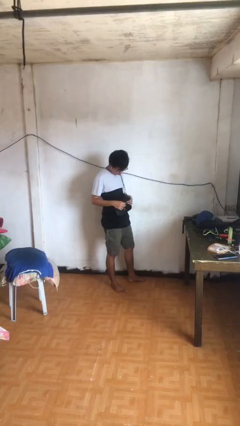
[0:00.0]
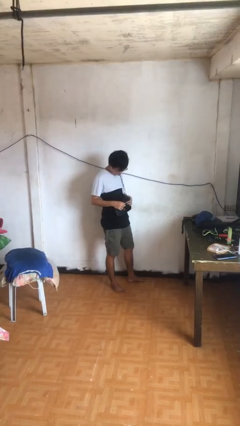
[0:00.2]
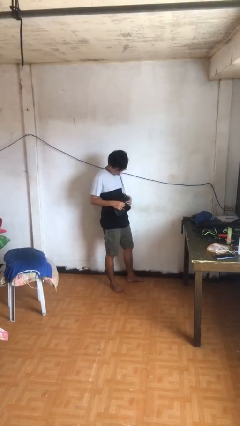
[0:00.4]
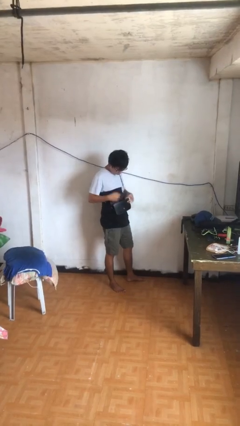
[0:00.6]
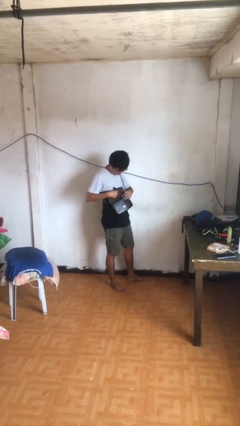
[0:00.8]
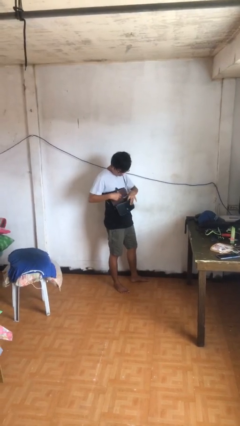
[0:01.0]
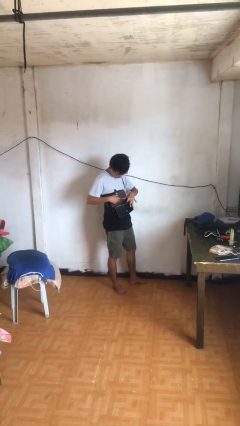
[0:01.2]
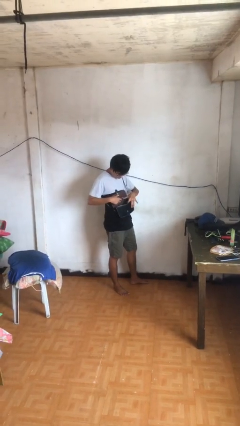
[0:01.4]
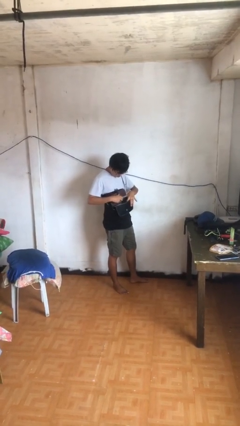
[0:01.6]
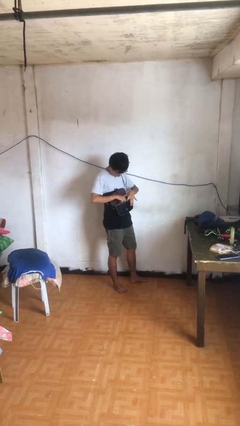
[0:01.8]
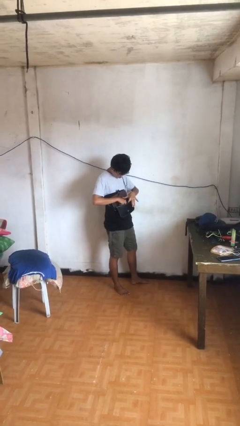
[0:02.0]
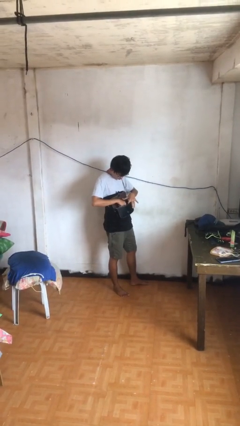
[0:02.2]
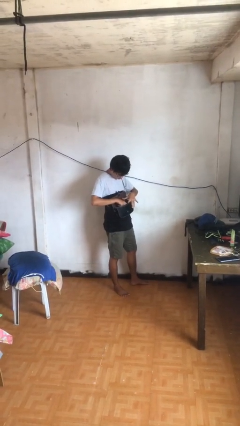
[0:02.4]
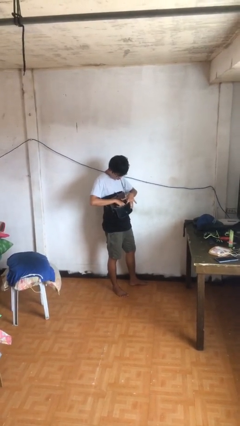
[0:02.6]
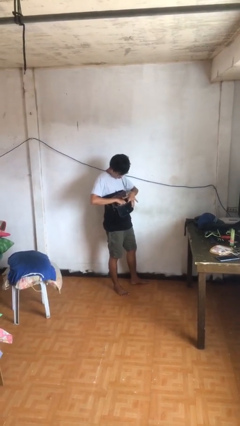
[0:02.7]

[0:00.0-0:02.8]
person searches in purse

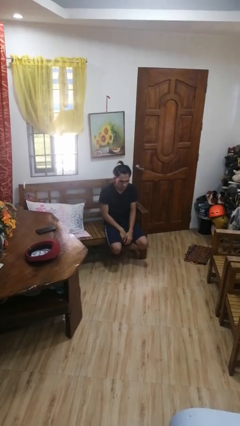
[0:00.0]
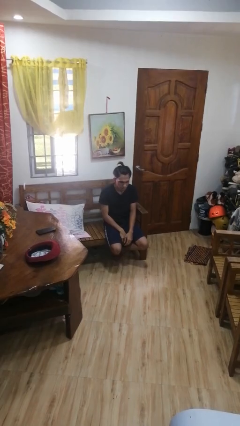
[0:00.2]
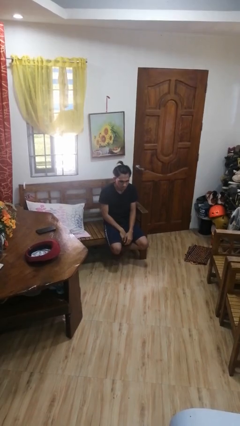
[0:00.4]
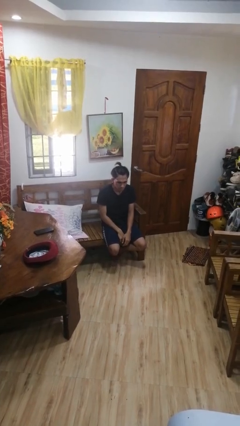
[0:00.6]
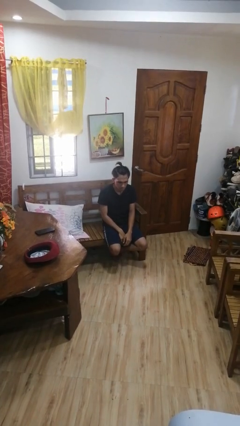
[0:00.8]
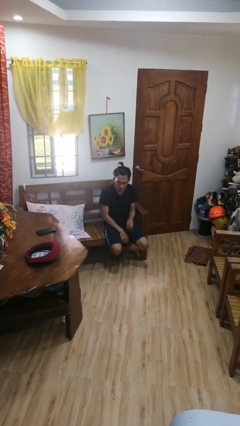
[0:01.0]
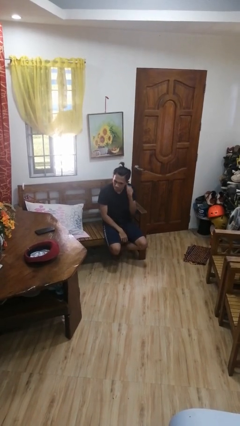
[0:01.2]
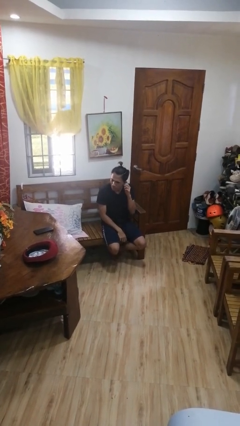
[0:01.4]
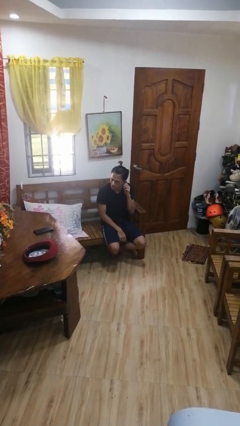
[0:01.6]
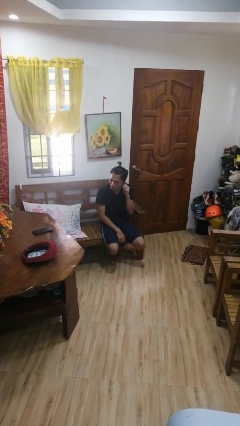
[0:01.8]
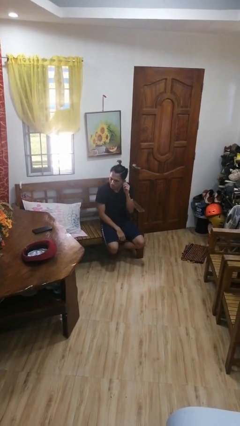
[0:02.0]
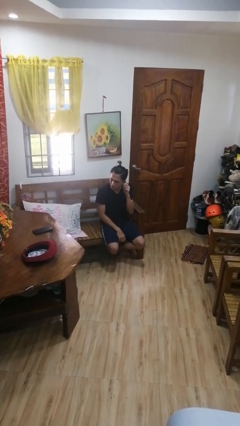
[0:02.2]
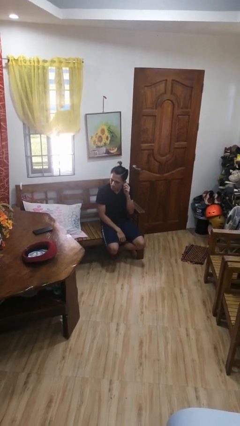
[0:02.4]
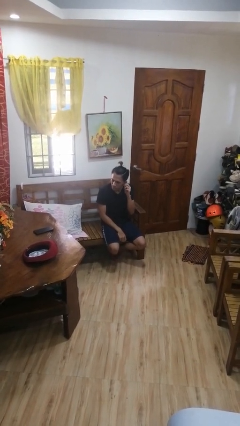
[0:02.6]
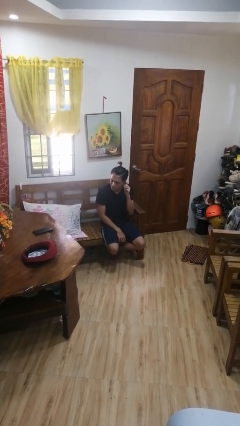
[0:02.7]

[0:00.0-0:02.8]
person touches earlobe

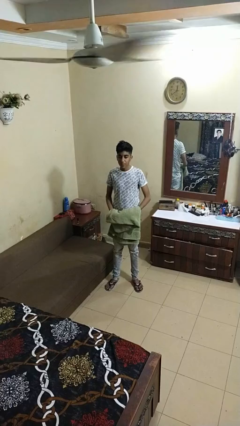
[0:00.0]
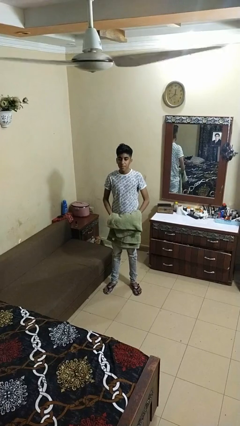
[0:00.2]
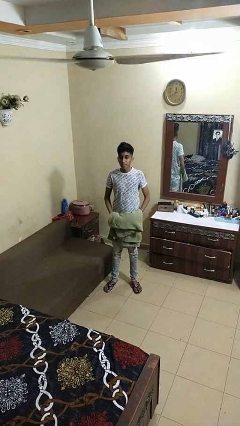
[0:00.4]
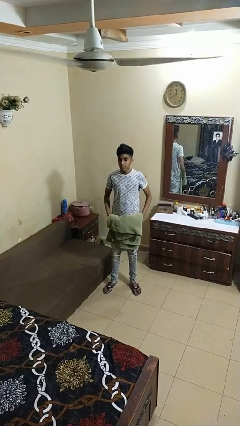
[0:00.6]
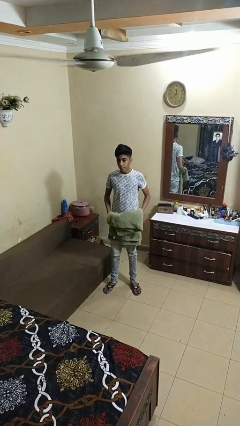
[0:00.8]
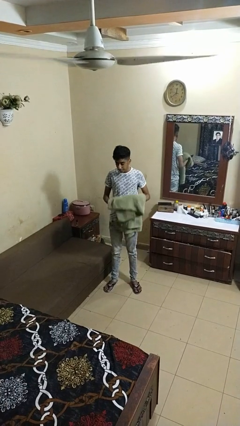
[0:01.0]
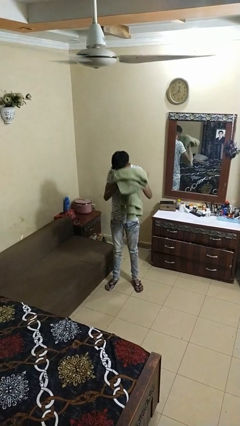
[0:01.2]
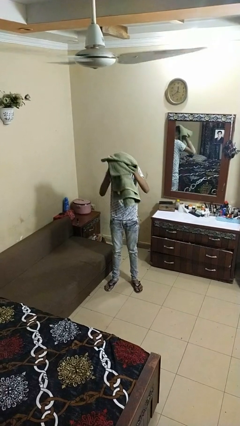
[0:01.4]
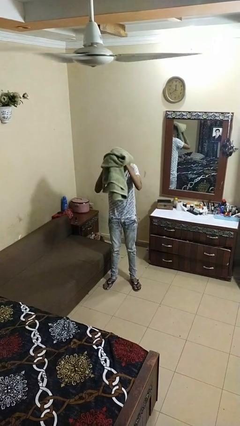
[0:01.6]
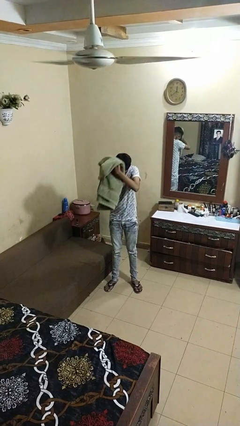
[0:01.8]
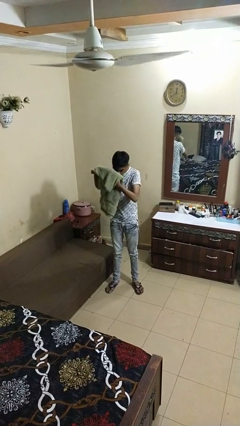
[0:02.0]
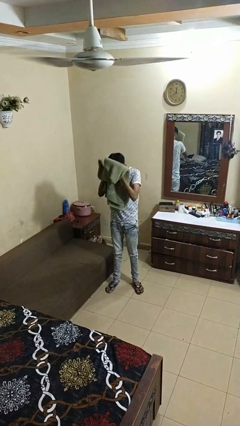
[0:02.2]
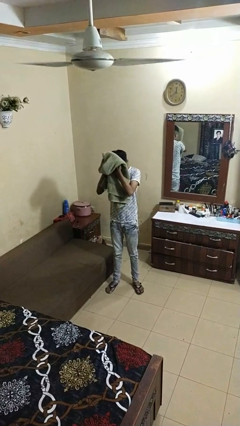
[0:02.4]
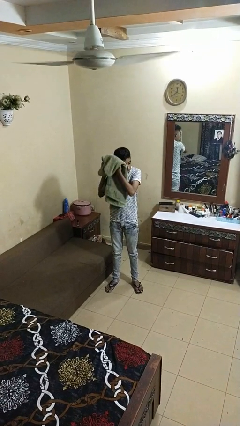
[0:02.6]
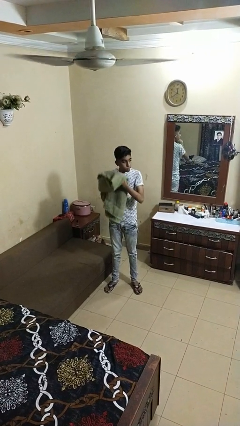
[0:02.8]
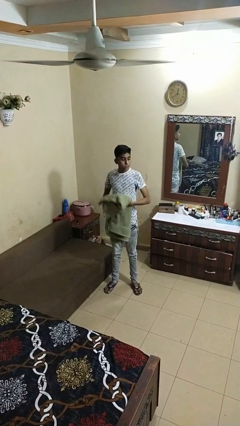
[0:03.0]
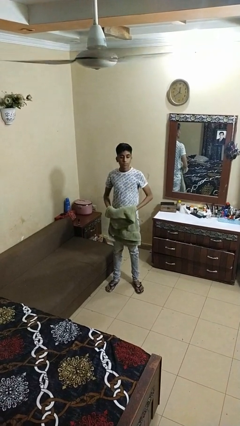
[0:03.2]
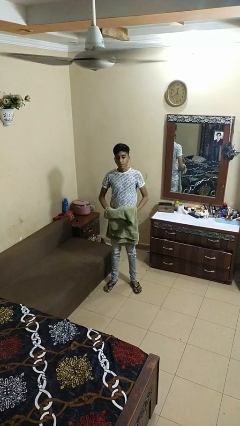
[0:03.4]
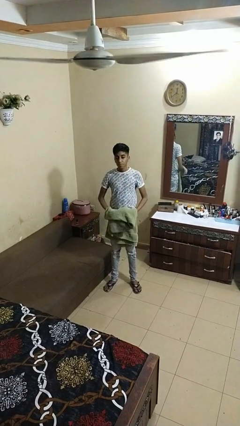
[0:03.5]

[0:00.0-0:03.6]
person dries hair with towel

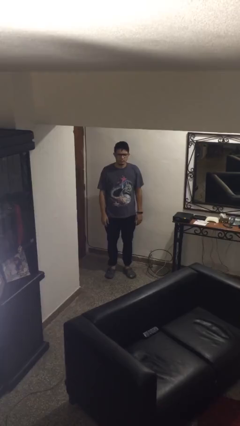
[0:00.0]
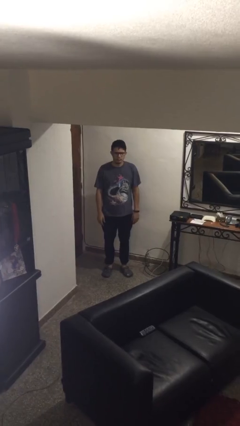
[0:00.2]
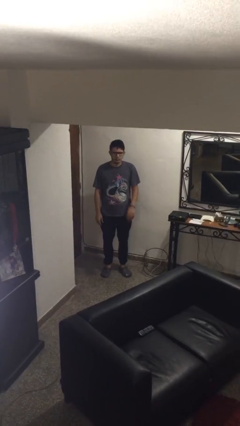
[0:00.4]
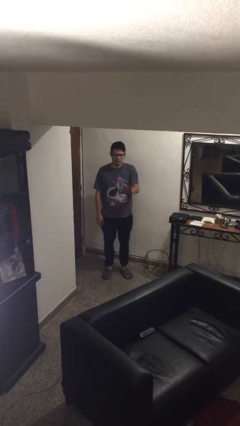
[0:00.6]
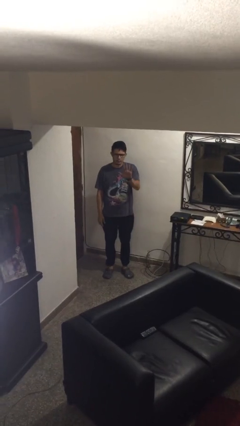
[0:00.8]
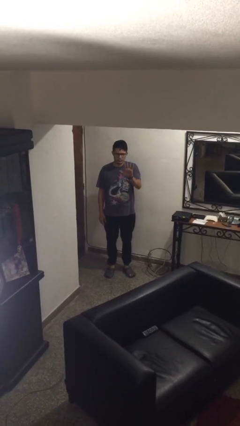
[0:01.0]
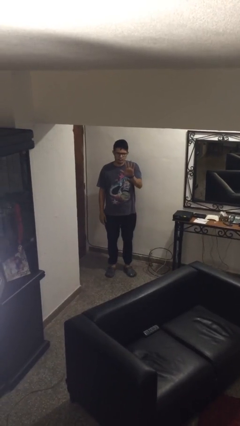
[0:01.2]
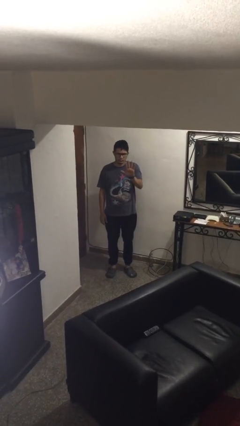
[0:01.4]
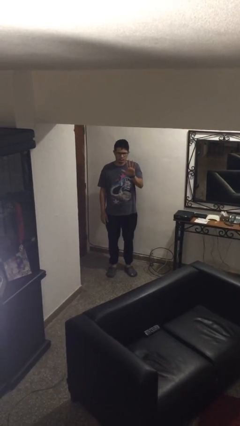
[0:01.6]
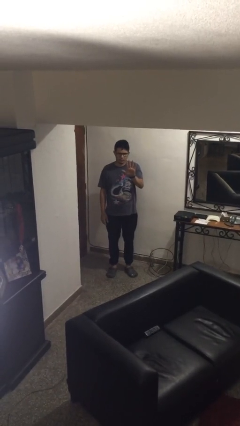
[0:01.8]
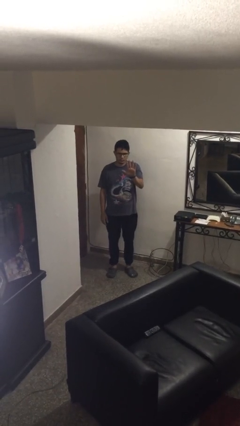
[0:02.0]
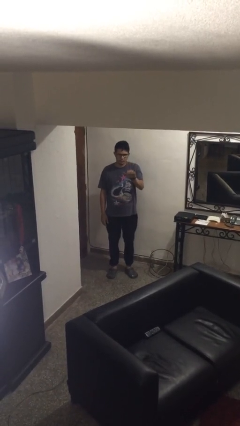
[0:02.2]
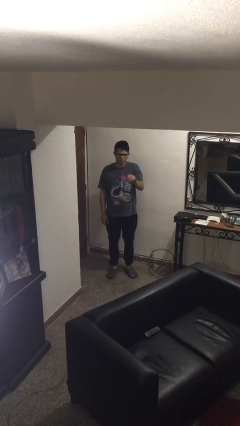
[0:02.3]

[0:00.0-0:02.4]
person gestures number five

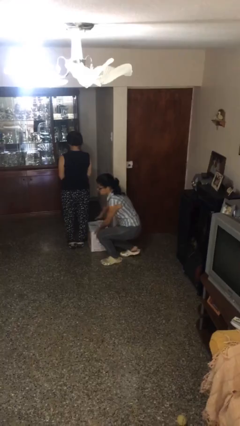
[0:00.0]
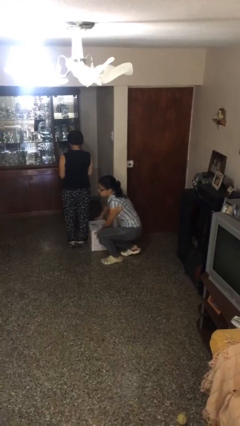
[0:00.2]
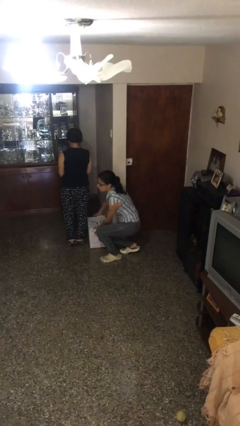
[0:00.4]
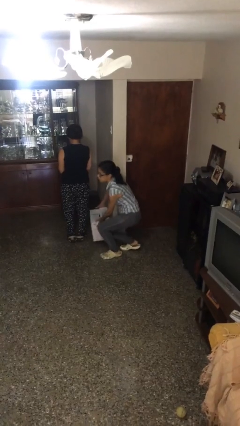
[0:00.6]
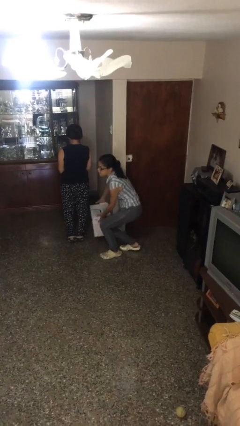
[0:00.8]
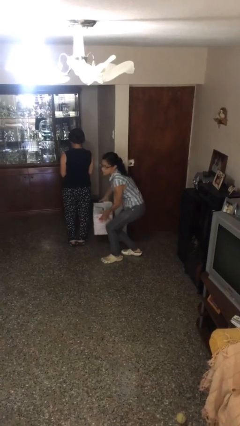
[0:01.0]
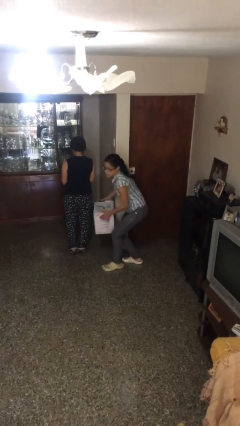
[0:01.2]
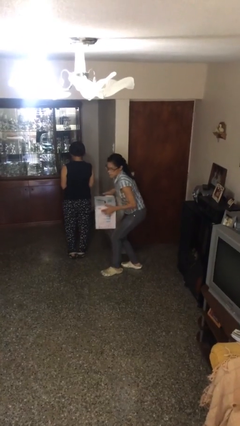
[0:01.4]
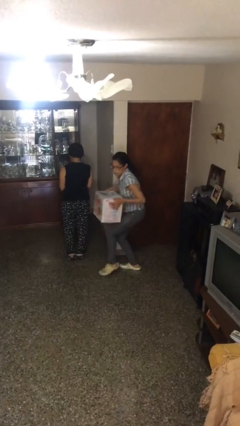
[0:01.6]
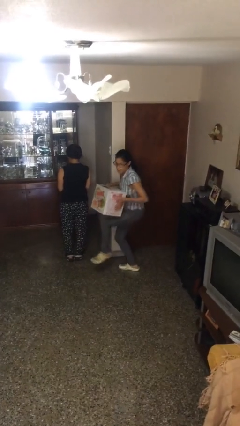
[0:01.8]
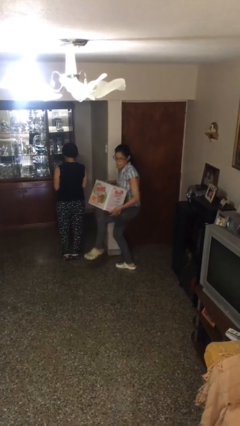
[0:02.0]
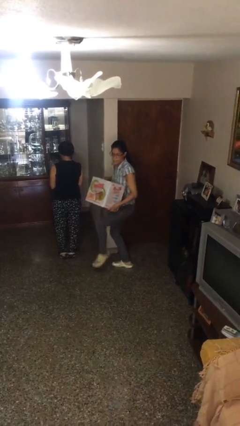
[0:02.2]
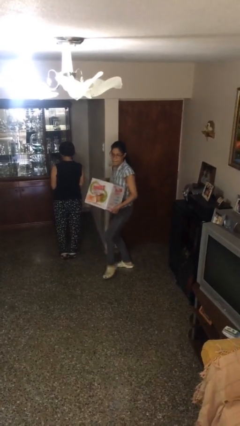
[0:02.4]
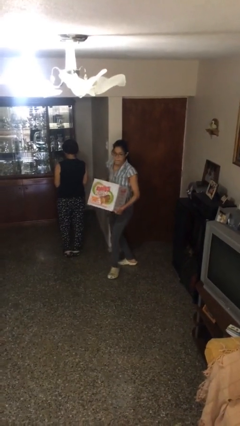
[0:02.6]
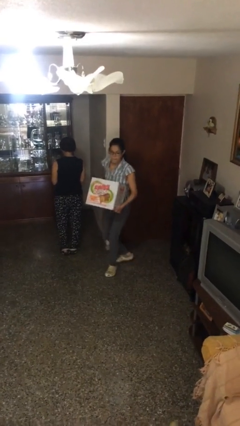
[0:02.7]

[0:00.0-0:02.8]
person steals object from person

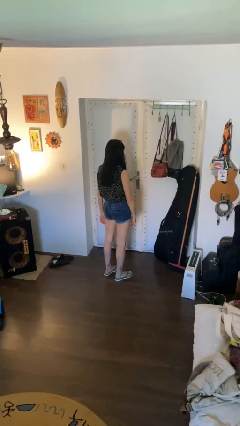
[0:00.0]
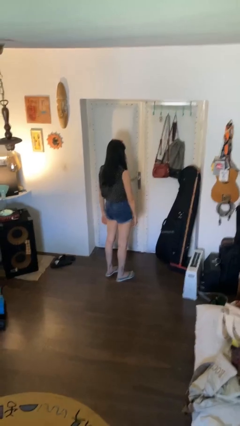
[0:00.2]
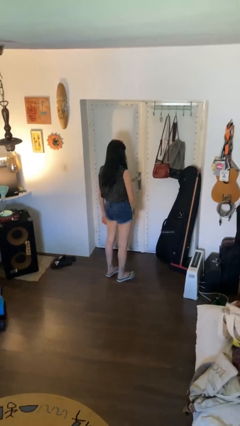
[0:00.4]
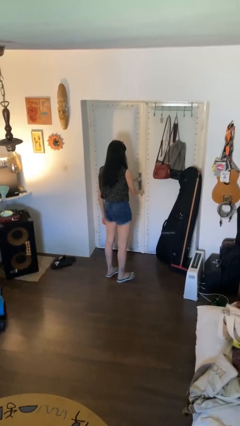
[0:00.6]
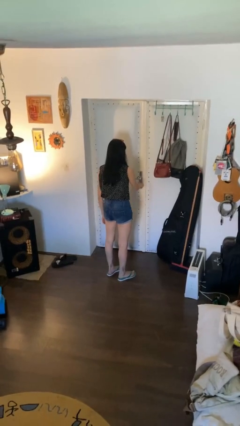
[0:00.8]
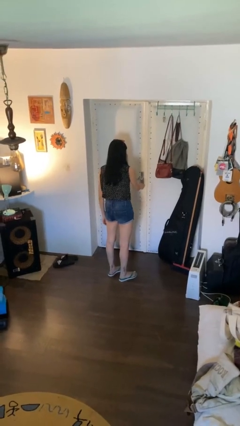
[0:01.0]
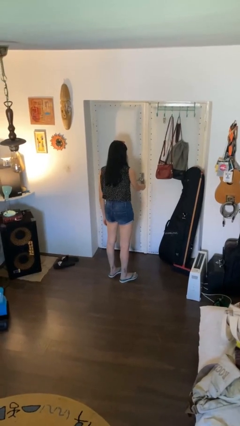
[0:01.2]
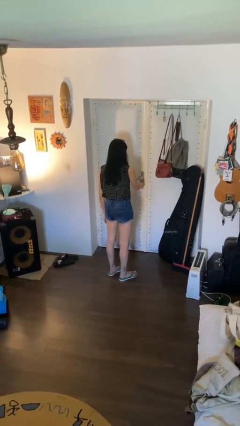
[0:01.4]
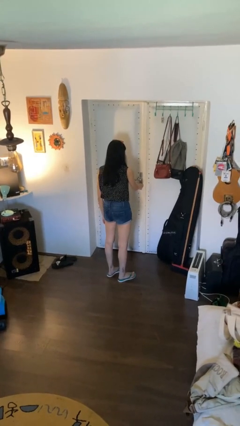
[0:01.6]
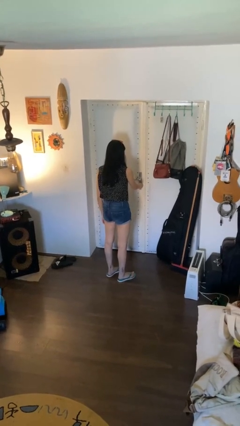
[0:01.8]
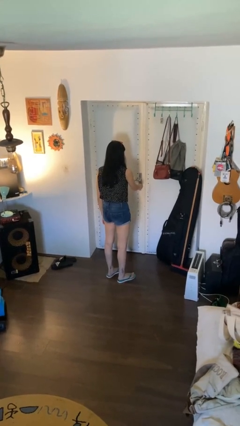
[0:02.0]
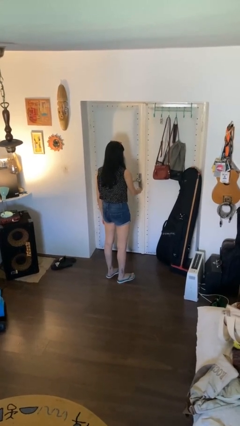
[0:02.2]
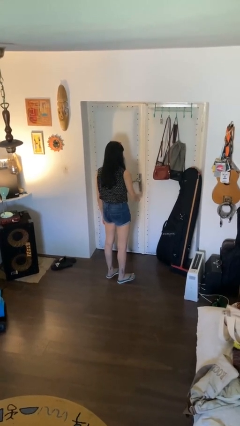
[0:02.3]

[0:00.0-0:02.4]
person locks door with keys

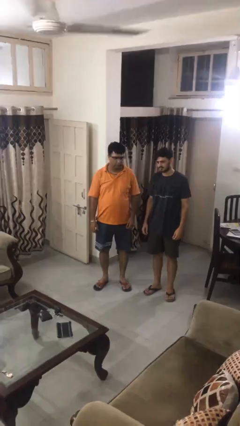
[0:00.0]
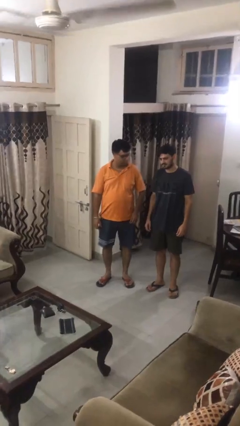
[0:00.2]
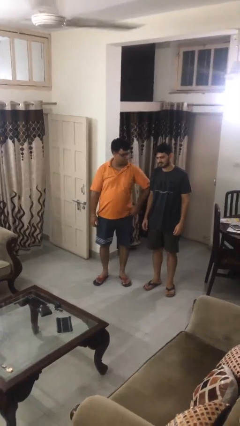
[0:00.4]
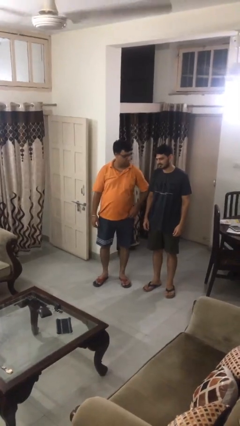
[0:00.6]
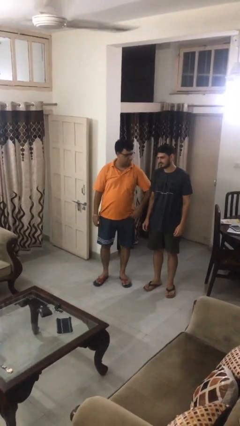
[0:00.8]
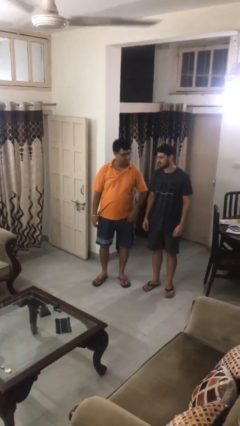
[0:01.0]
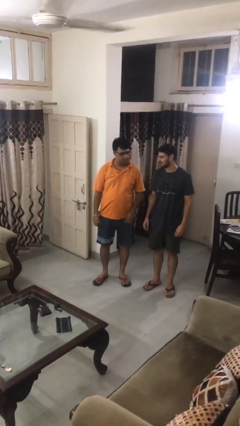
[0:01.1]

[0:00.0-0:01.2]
person nudges person with elbow
